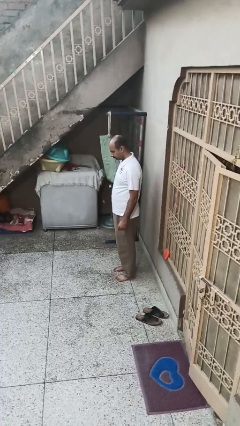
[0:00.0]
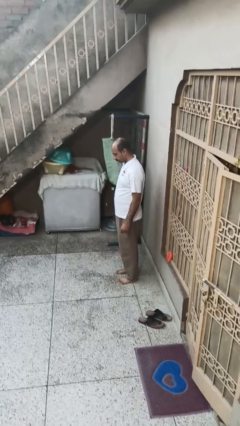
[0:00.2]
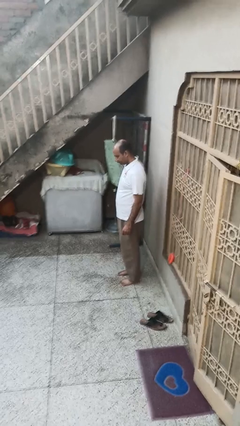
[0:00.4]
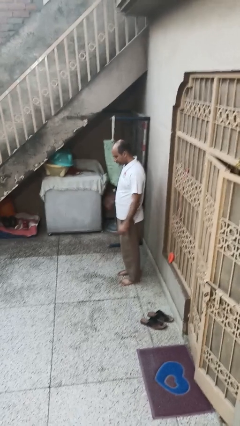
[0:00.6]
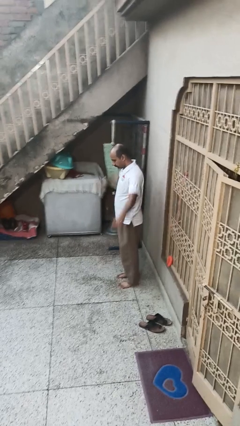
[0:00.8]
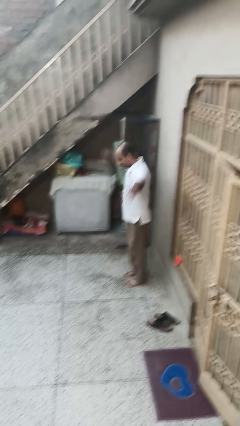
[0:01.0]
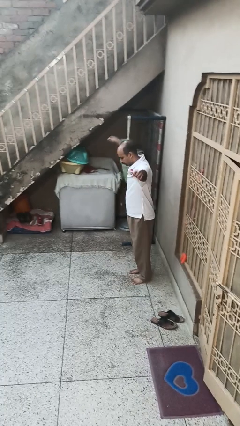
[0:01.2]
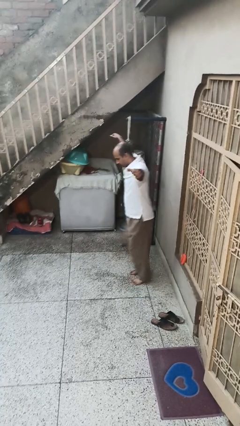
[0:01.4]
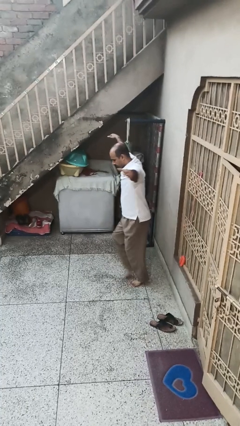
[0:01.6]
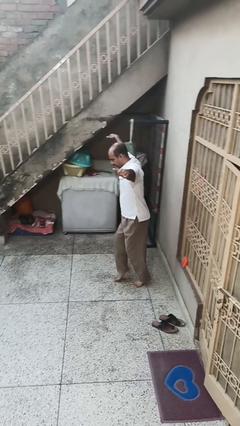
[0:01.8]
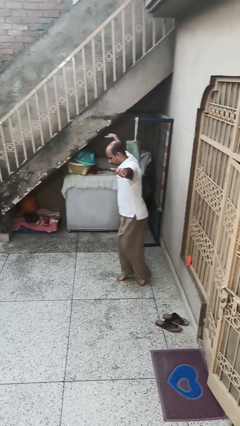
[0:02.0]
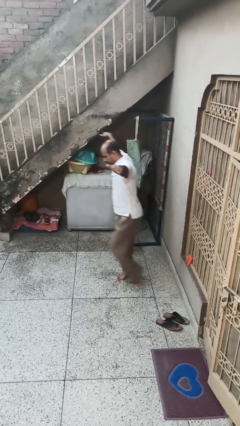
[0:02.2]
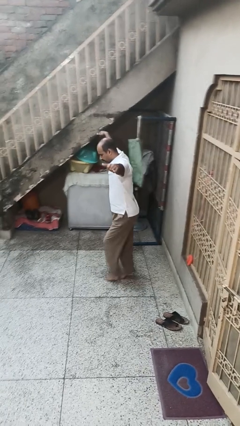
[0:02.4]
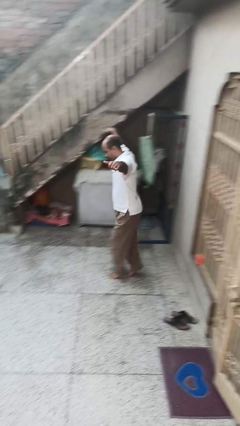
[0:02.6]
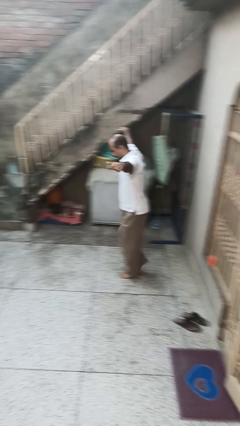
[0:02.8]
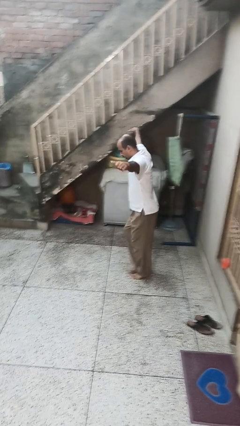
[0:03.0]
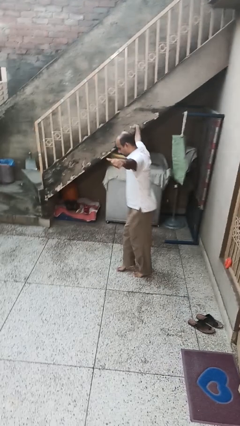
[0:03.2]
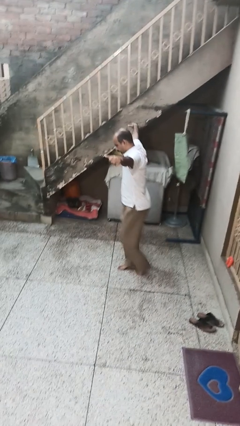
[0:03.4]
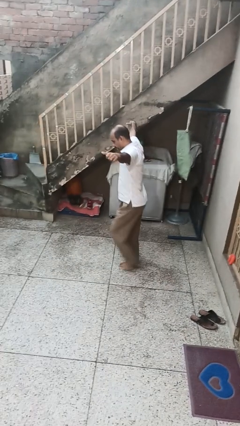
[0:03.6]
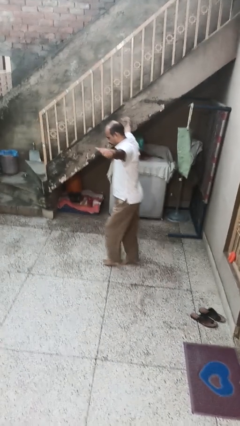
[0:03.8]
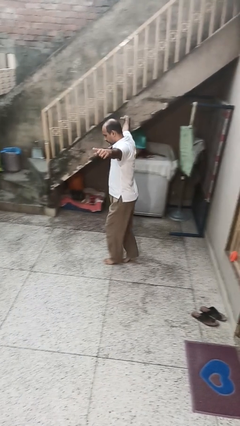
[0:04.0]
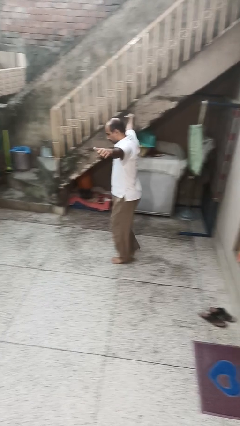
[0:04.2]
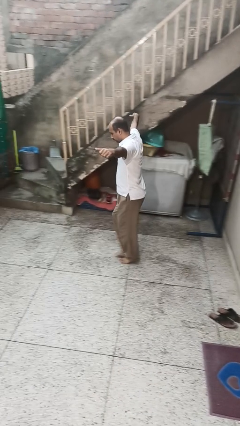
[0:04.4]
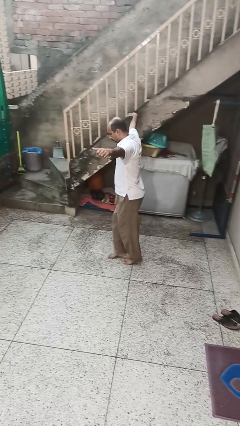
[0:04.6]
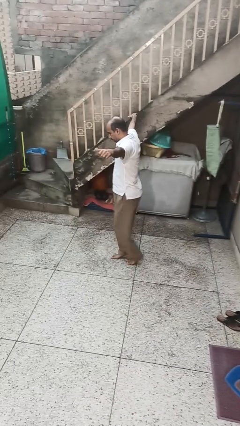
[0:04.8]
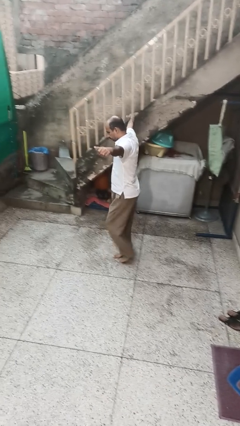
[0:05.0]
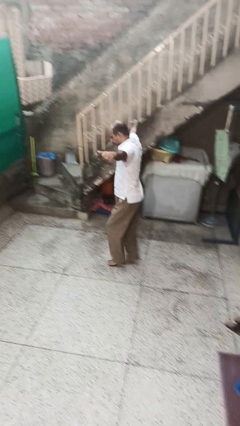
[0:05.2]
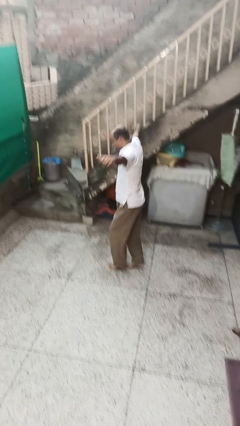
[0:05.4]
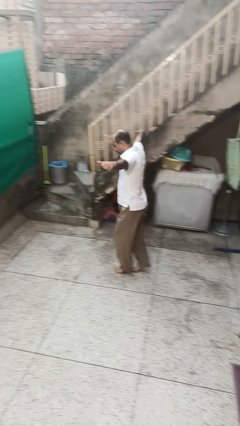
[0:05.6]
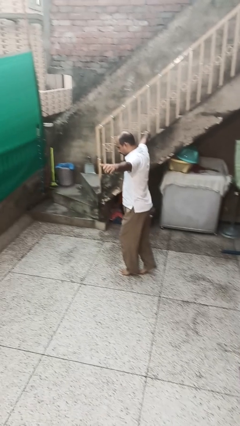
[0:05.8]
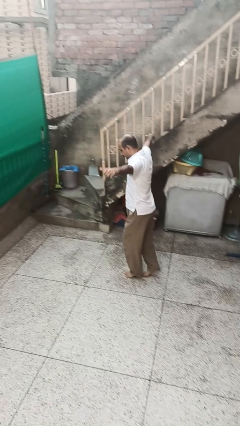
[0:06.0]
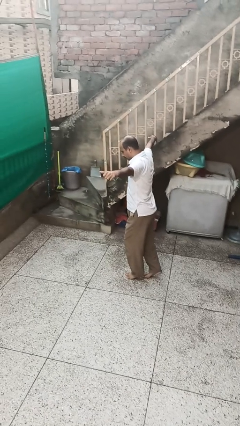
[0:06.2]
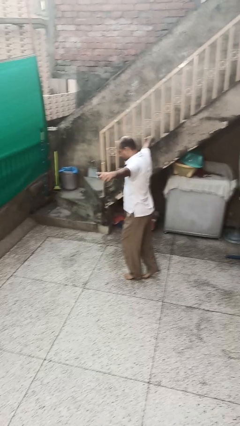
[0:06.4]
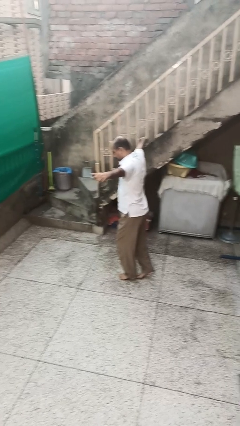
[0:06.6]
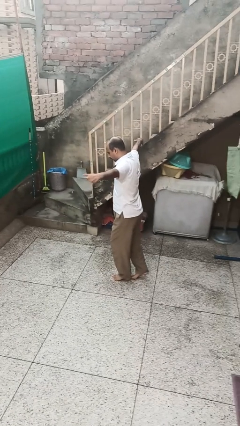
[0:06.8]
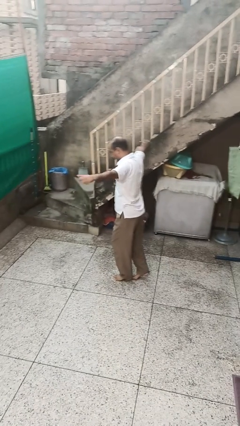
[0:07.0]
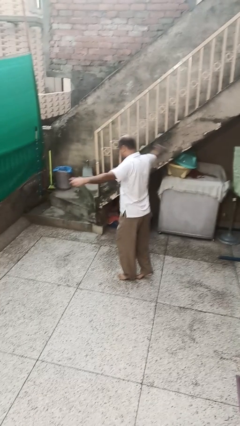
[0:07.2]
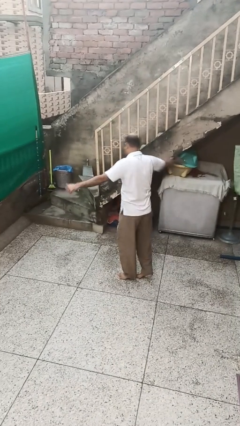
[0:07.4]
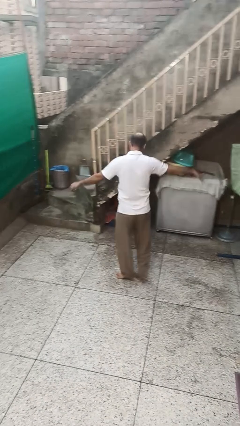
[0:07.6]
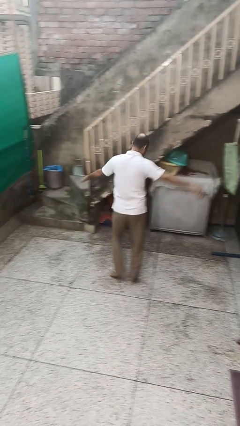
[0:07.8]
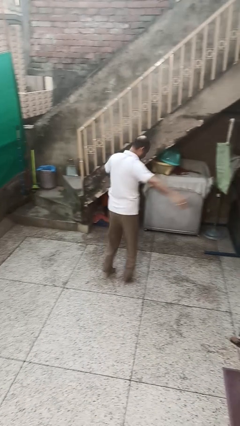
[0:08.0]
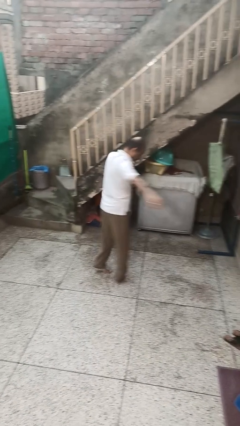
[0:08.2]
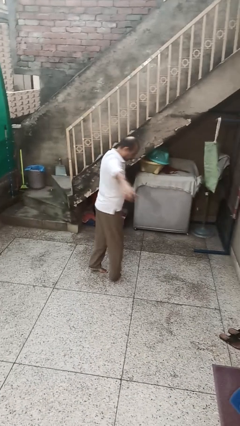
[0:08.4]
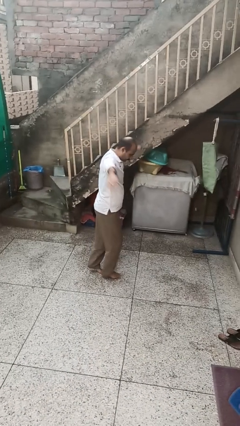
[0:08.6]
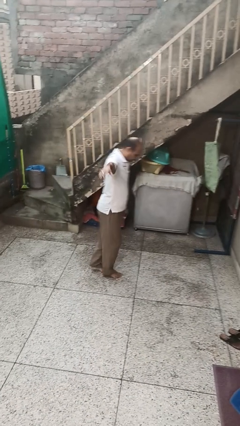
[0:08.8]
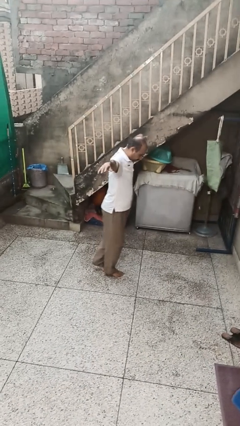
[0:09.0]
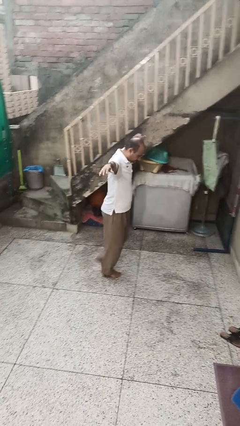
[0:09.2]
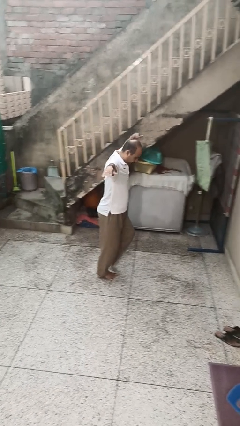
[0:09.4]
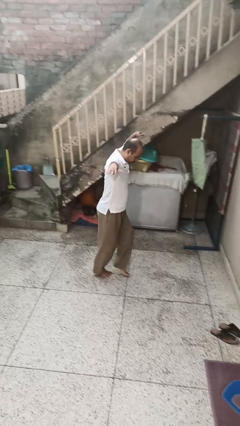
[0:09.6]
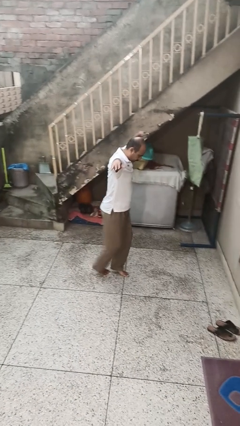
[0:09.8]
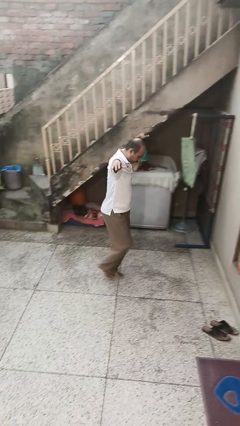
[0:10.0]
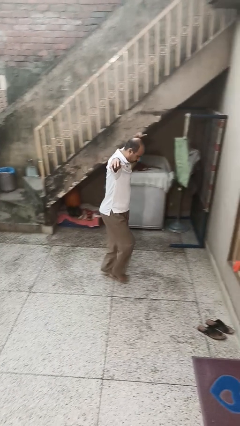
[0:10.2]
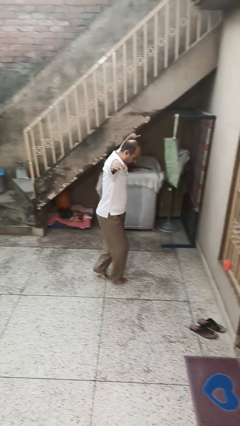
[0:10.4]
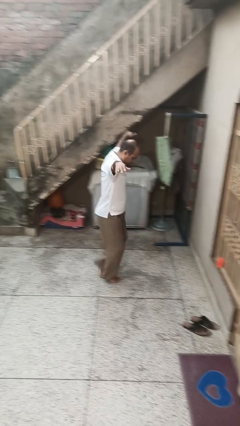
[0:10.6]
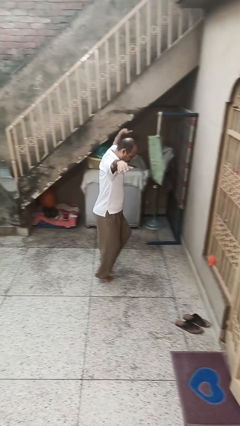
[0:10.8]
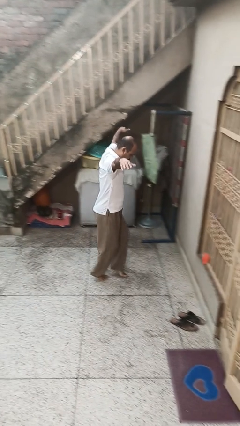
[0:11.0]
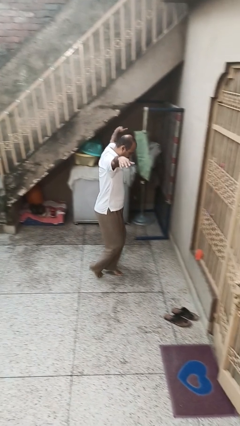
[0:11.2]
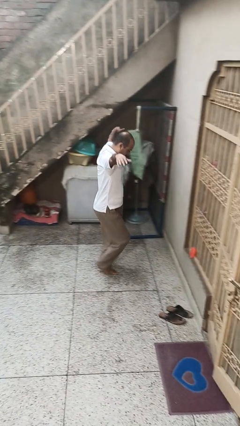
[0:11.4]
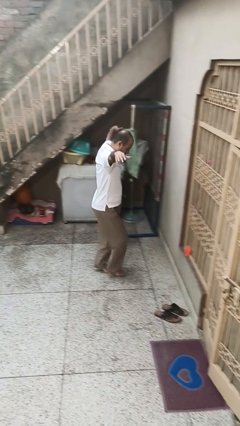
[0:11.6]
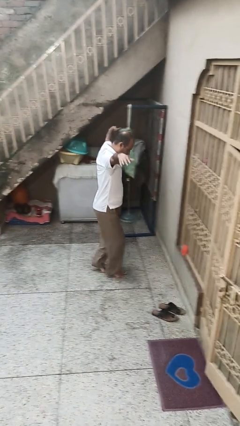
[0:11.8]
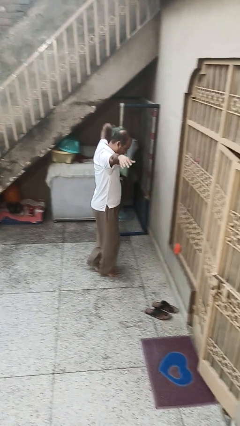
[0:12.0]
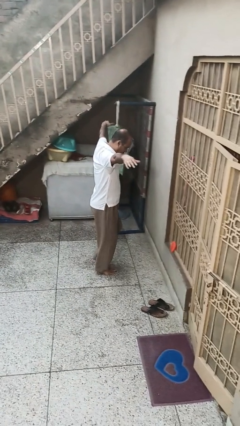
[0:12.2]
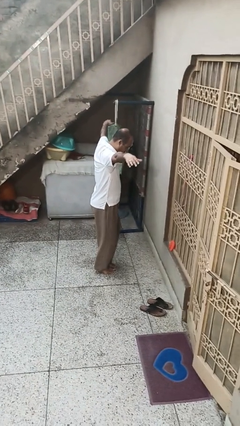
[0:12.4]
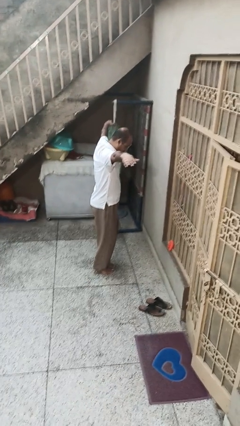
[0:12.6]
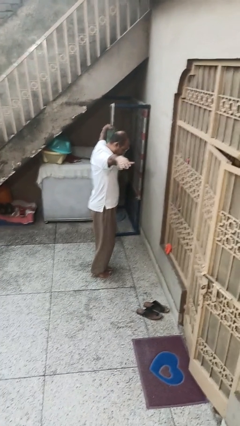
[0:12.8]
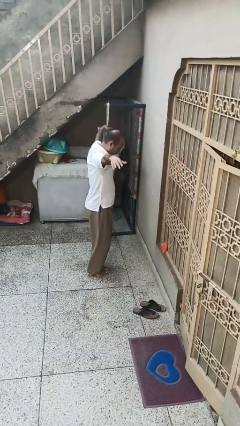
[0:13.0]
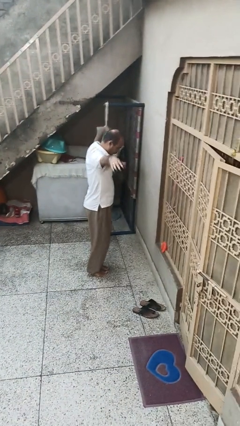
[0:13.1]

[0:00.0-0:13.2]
person walks tiptoe

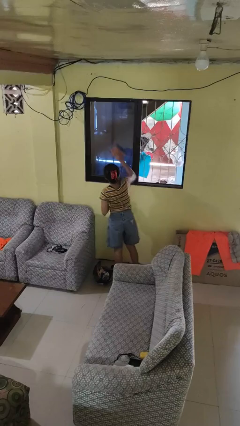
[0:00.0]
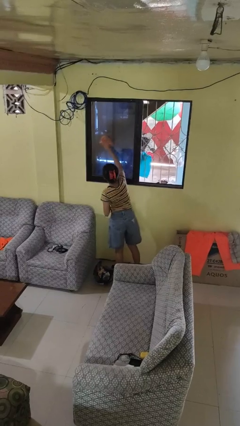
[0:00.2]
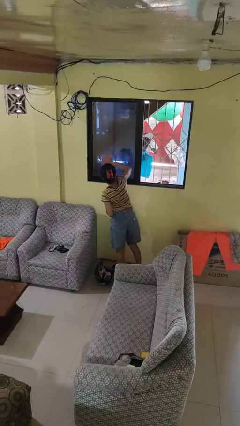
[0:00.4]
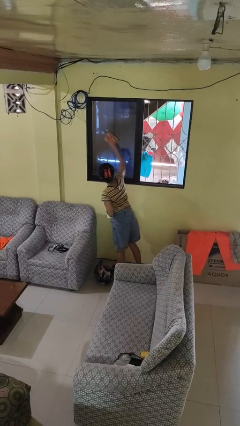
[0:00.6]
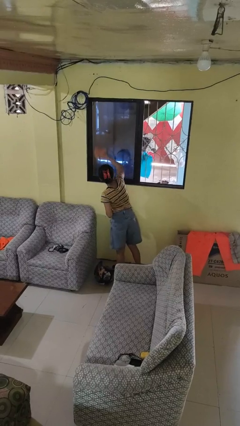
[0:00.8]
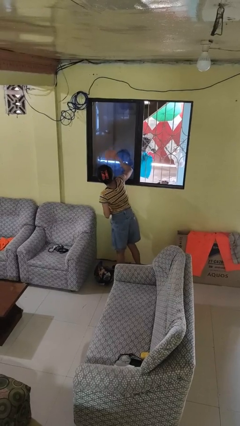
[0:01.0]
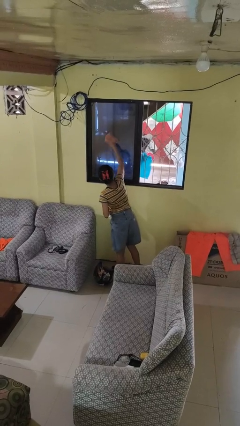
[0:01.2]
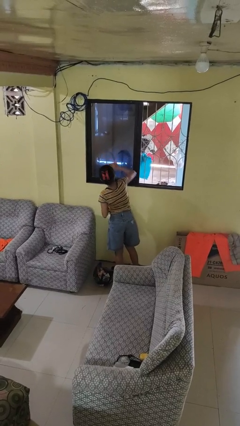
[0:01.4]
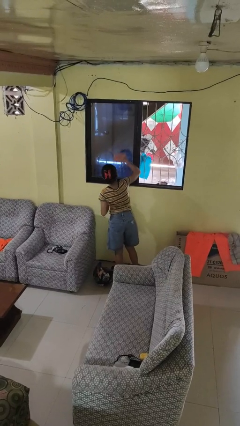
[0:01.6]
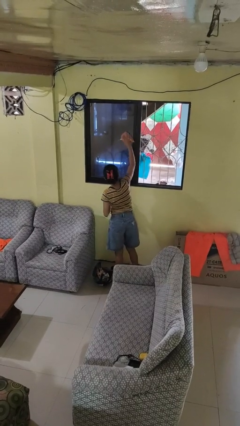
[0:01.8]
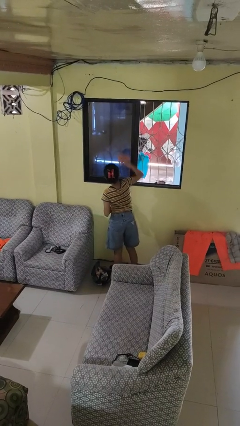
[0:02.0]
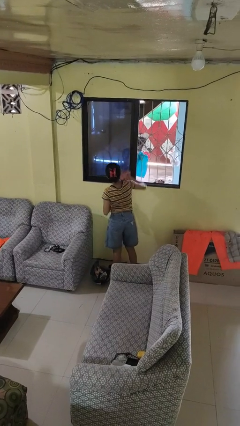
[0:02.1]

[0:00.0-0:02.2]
person washes window

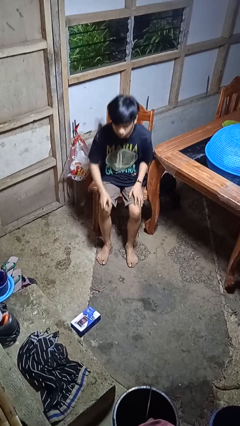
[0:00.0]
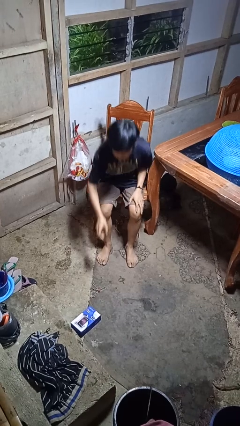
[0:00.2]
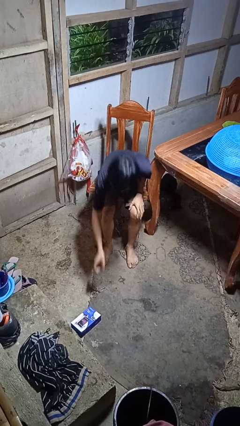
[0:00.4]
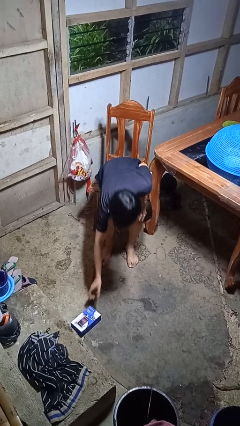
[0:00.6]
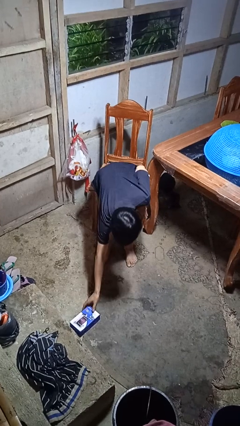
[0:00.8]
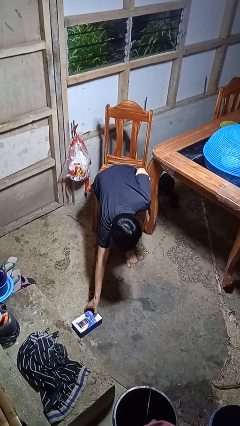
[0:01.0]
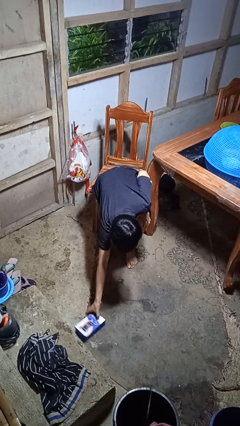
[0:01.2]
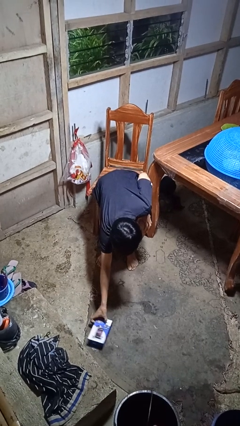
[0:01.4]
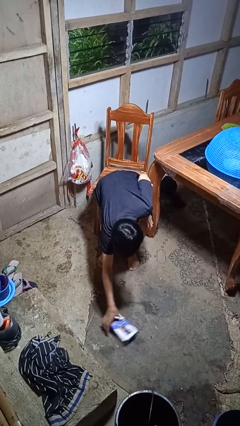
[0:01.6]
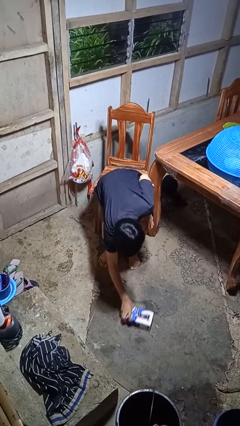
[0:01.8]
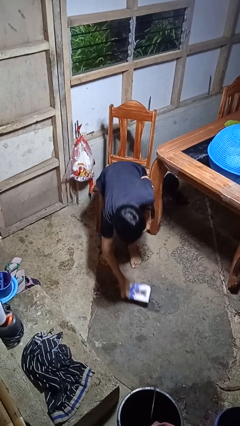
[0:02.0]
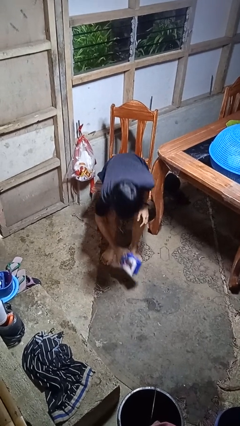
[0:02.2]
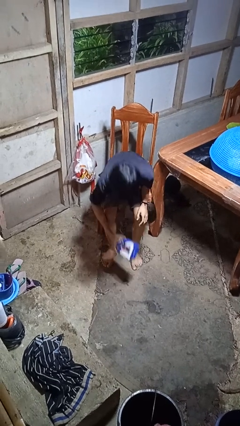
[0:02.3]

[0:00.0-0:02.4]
person picks up object from floor
